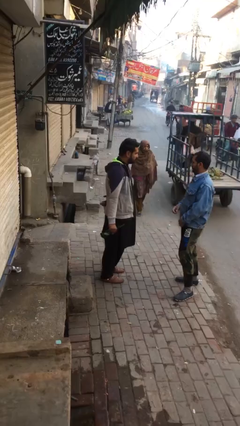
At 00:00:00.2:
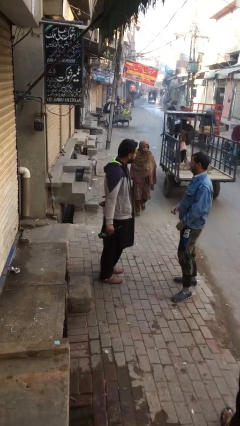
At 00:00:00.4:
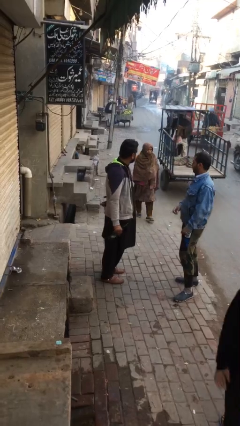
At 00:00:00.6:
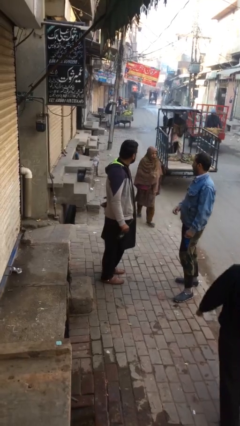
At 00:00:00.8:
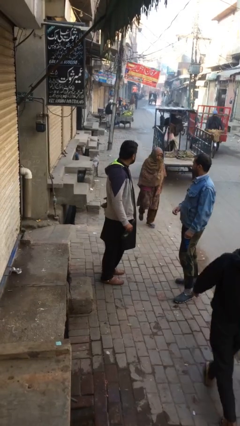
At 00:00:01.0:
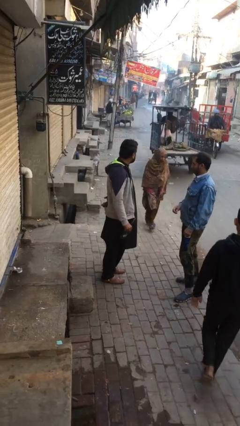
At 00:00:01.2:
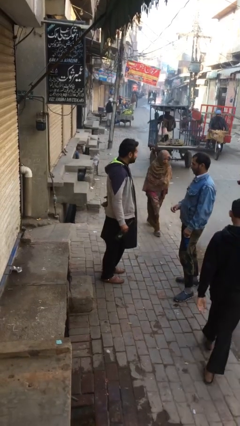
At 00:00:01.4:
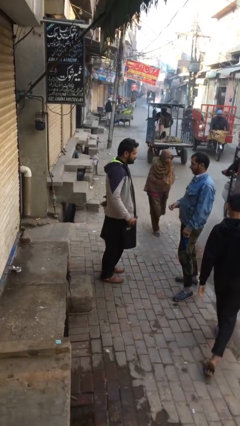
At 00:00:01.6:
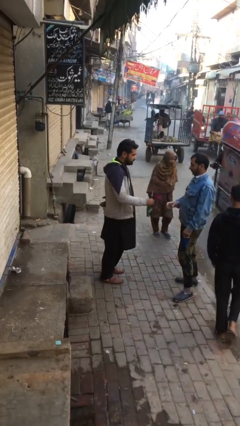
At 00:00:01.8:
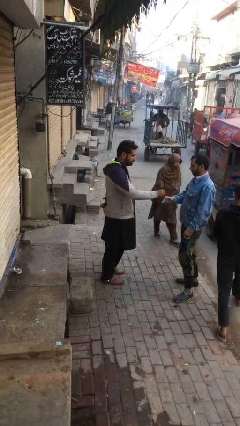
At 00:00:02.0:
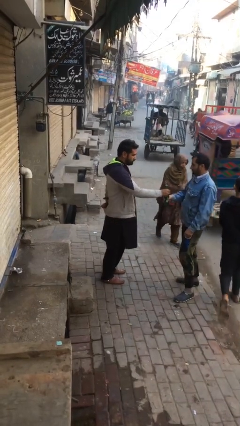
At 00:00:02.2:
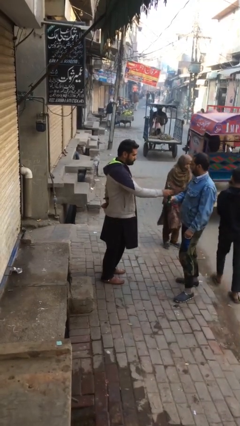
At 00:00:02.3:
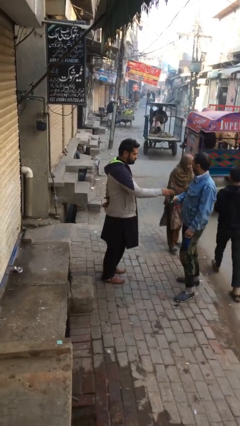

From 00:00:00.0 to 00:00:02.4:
person transfers object to person

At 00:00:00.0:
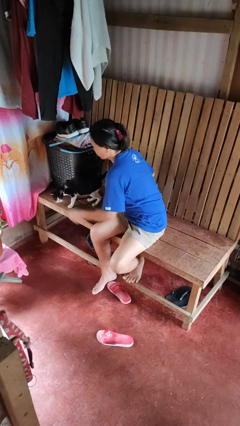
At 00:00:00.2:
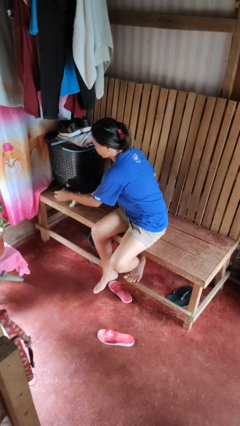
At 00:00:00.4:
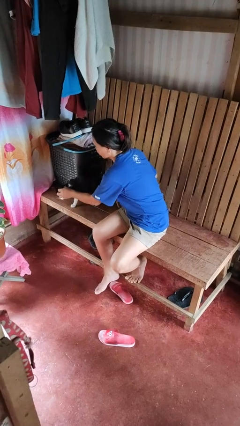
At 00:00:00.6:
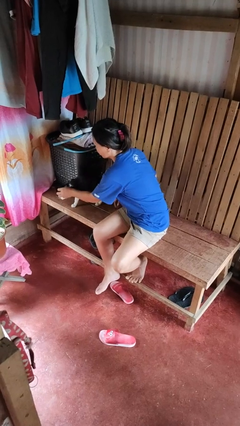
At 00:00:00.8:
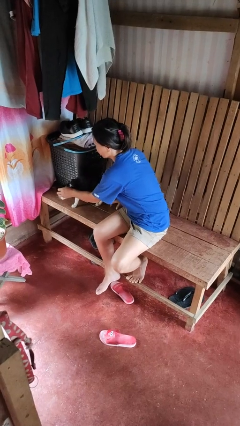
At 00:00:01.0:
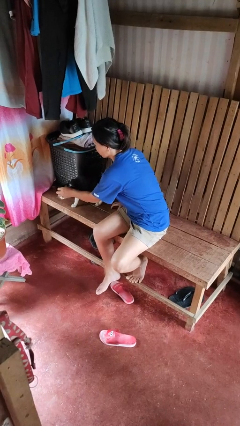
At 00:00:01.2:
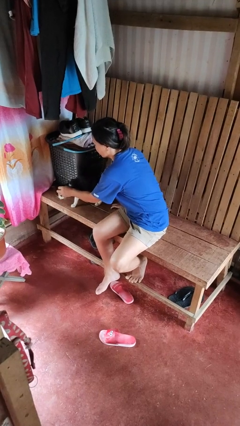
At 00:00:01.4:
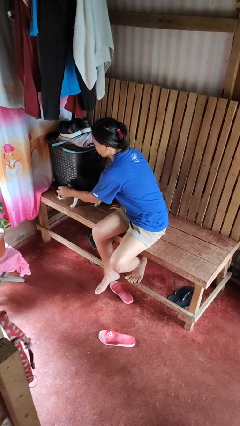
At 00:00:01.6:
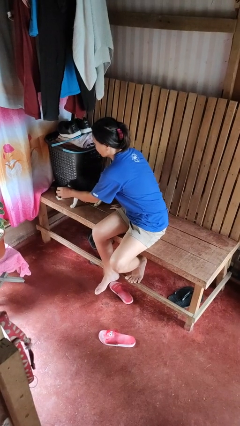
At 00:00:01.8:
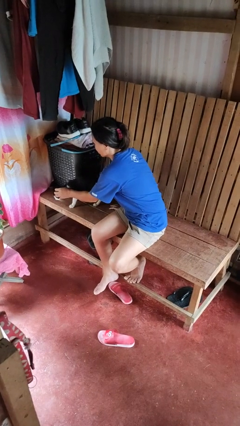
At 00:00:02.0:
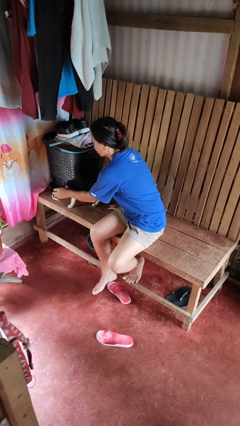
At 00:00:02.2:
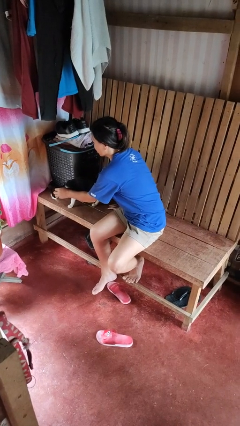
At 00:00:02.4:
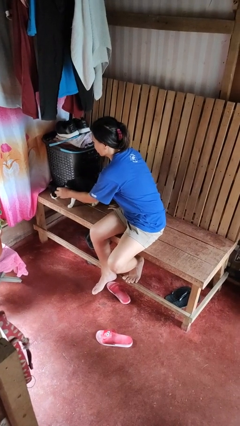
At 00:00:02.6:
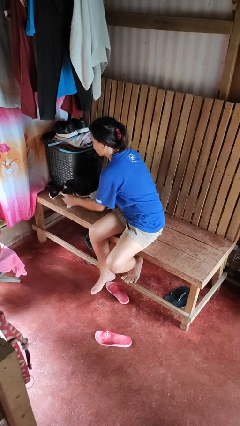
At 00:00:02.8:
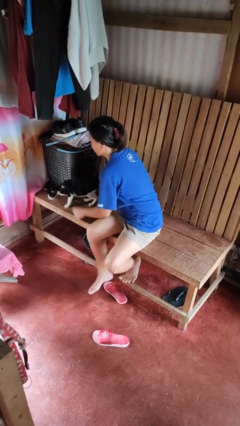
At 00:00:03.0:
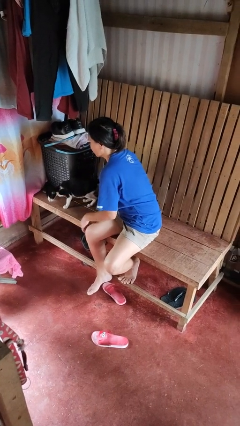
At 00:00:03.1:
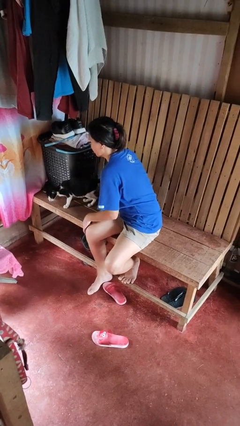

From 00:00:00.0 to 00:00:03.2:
person pets cat

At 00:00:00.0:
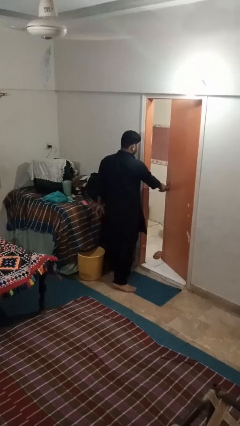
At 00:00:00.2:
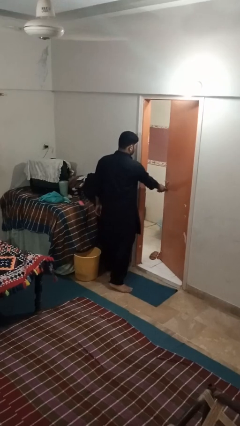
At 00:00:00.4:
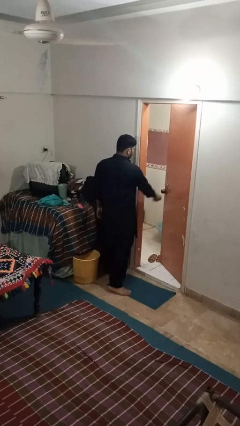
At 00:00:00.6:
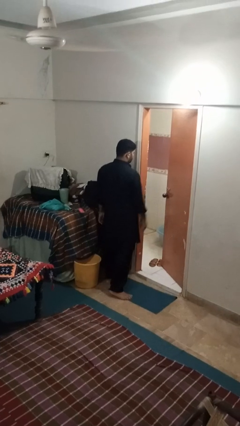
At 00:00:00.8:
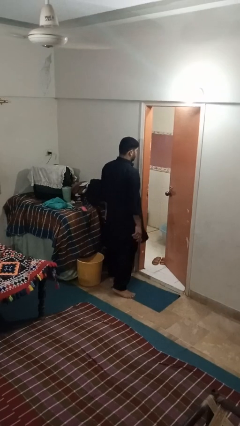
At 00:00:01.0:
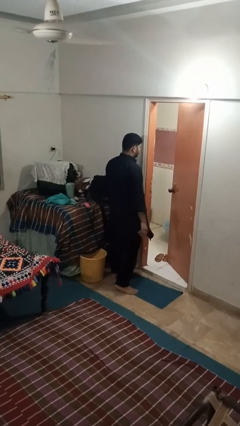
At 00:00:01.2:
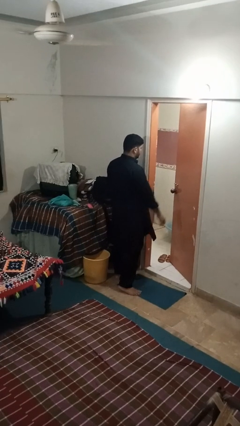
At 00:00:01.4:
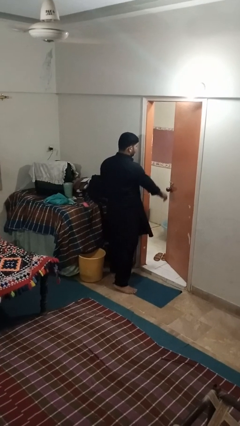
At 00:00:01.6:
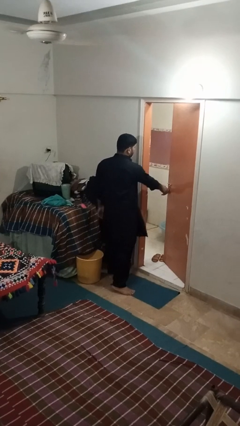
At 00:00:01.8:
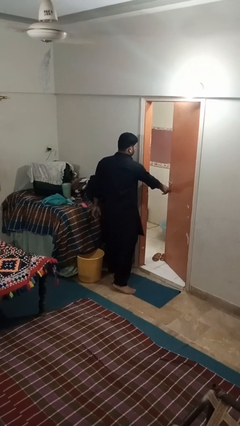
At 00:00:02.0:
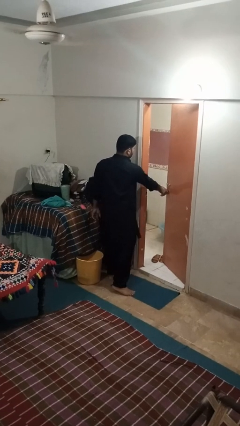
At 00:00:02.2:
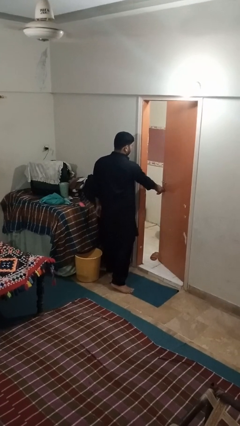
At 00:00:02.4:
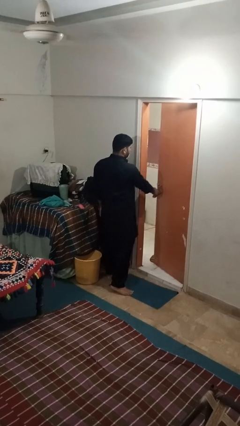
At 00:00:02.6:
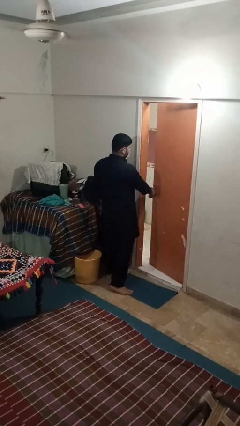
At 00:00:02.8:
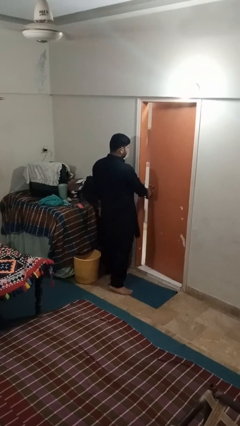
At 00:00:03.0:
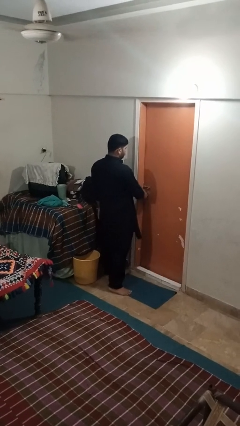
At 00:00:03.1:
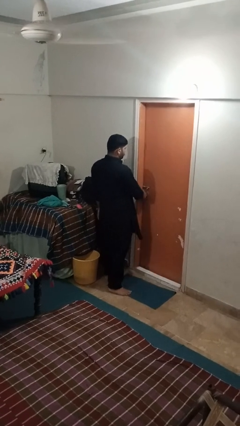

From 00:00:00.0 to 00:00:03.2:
person closes facility door

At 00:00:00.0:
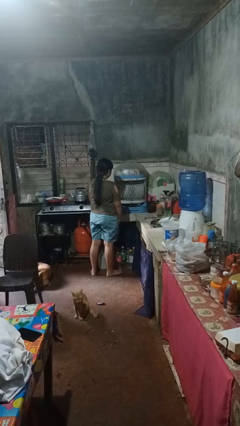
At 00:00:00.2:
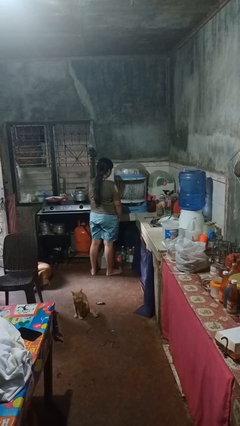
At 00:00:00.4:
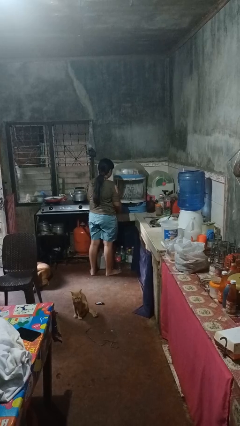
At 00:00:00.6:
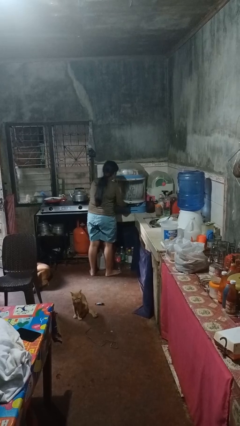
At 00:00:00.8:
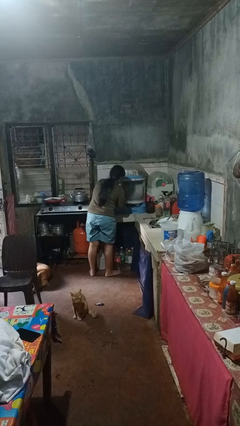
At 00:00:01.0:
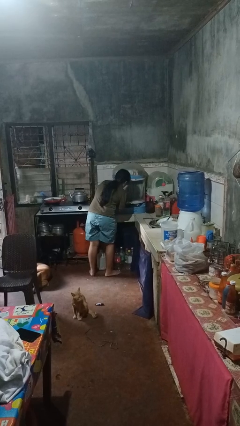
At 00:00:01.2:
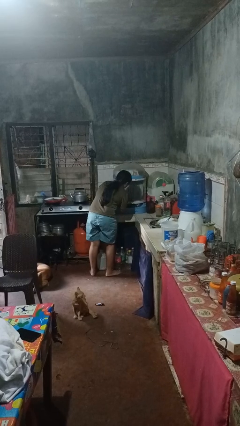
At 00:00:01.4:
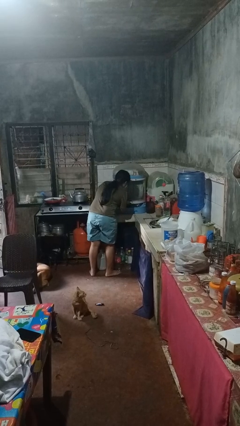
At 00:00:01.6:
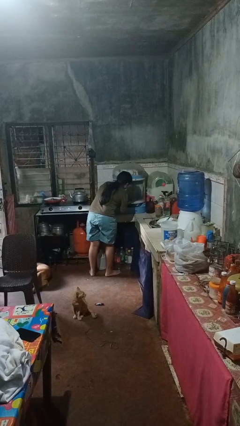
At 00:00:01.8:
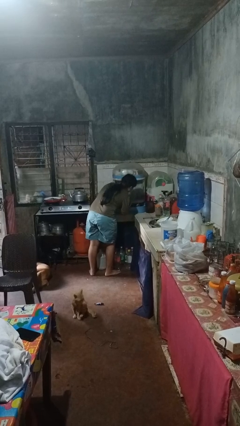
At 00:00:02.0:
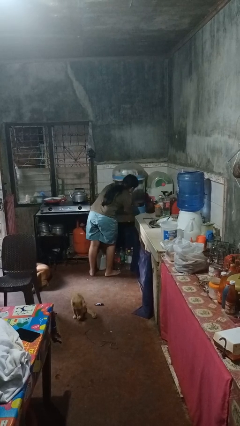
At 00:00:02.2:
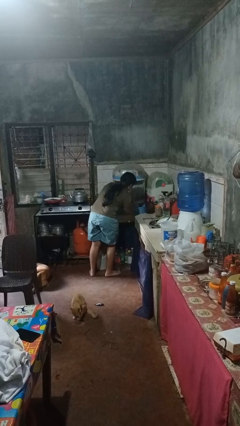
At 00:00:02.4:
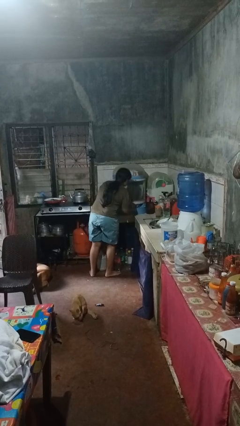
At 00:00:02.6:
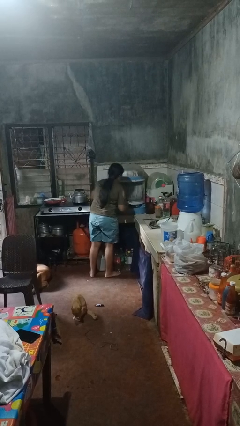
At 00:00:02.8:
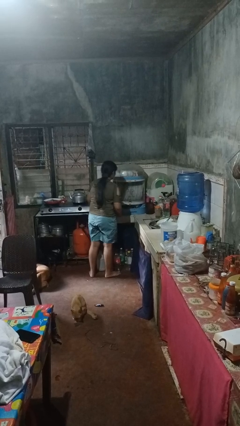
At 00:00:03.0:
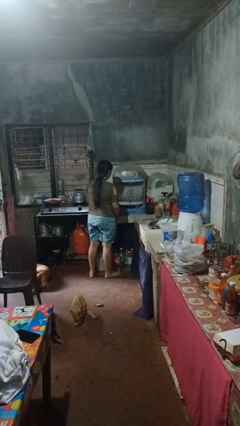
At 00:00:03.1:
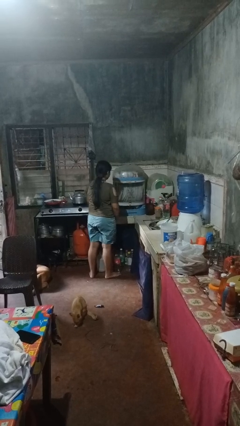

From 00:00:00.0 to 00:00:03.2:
person searches in kitchen drawer

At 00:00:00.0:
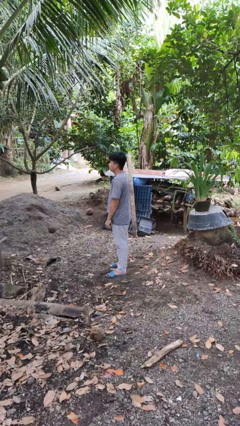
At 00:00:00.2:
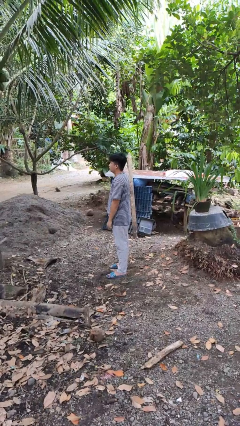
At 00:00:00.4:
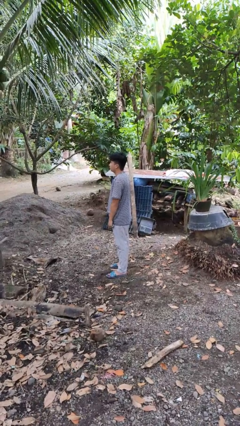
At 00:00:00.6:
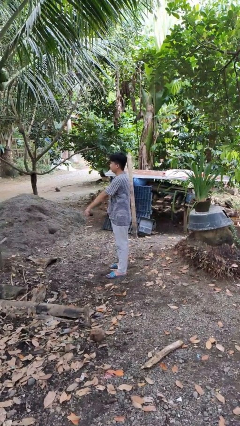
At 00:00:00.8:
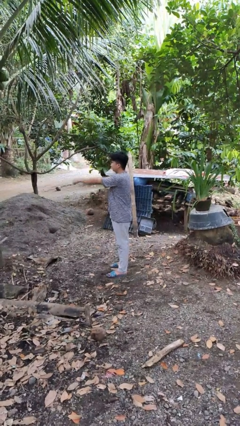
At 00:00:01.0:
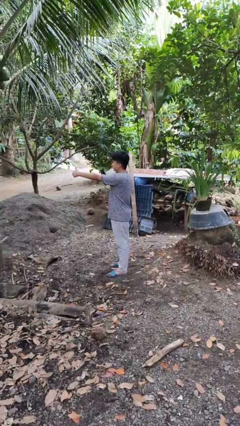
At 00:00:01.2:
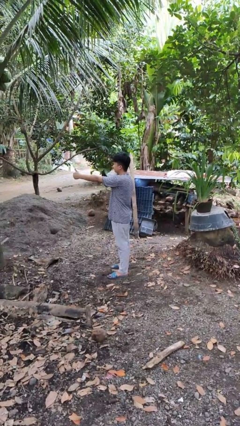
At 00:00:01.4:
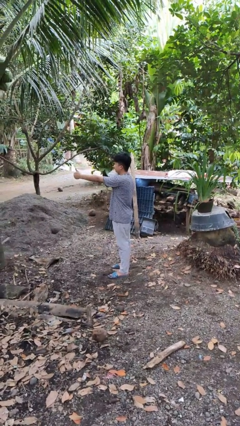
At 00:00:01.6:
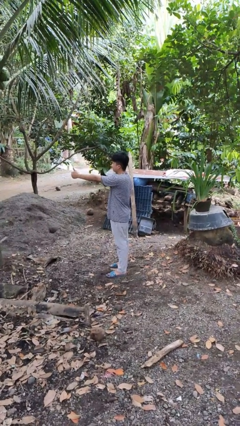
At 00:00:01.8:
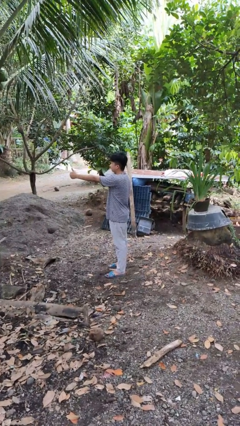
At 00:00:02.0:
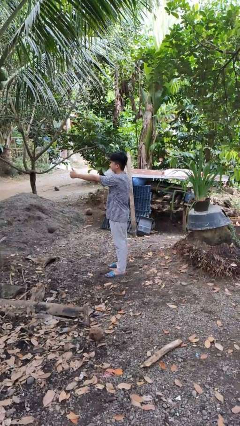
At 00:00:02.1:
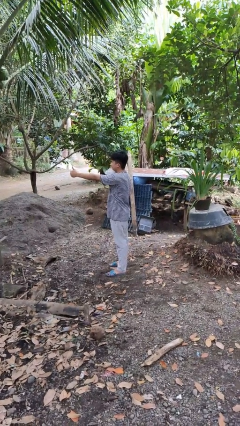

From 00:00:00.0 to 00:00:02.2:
person gestures thumbs up

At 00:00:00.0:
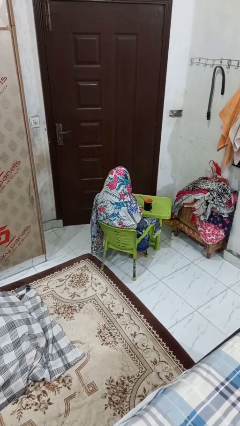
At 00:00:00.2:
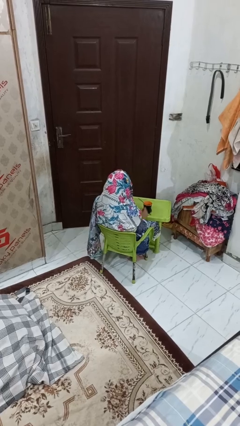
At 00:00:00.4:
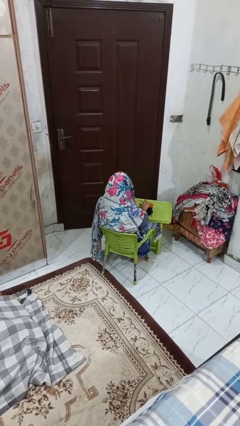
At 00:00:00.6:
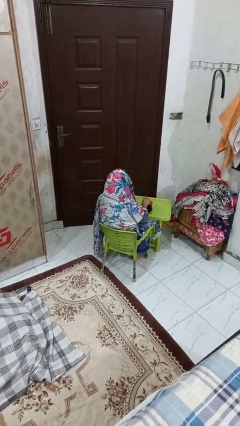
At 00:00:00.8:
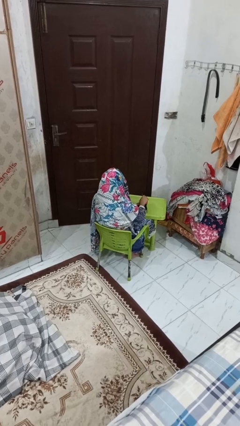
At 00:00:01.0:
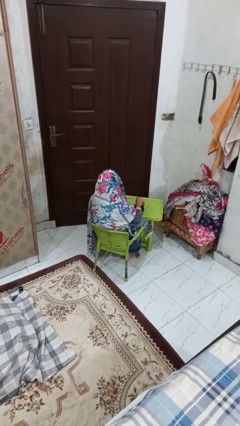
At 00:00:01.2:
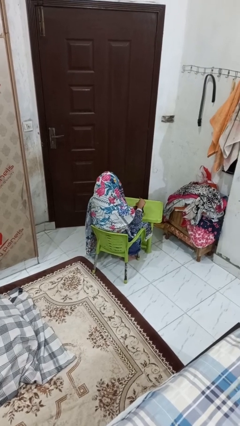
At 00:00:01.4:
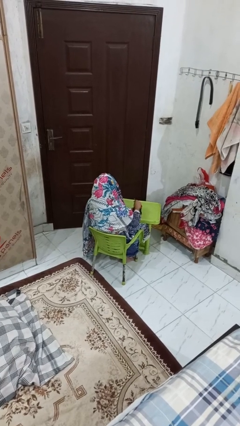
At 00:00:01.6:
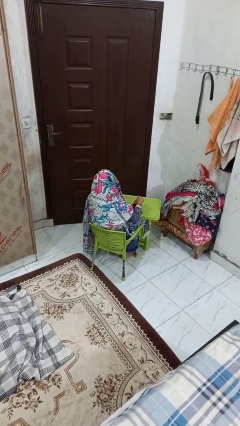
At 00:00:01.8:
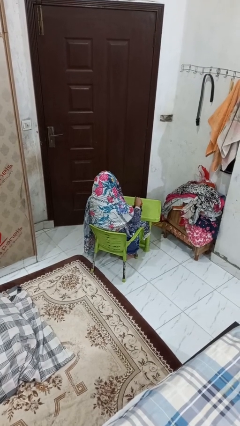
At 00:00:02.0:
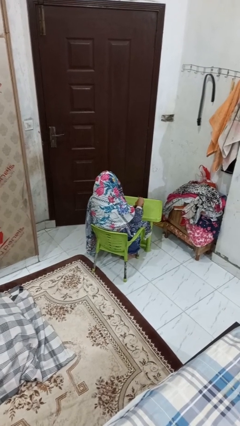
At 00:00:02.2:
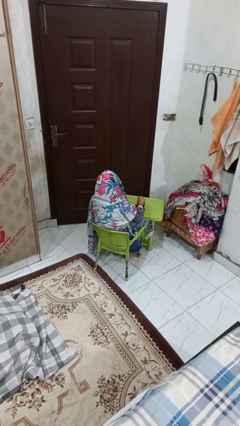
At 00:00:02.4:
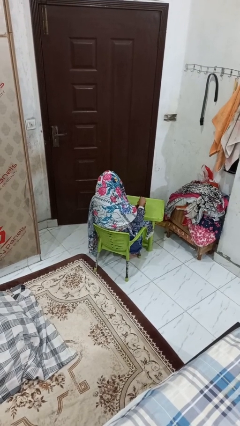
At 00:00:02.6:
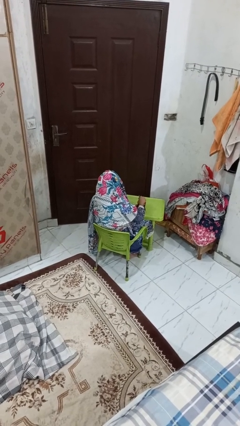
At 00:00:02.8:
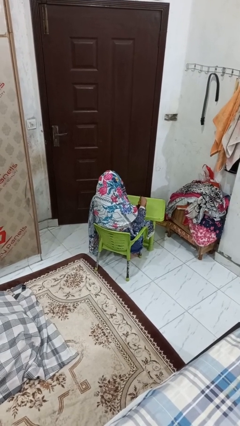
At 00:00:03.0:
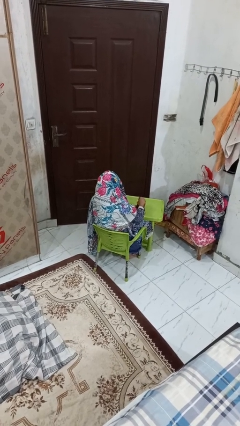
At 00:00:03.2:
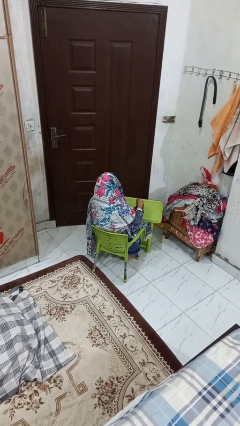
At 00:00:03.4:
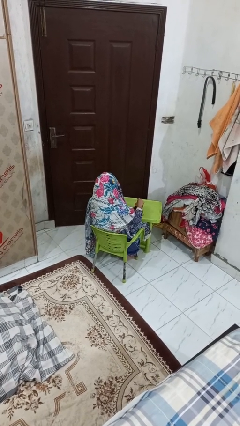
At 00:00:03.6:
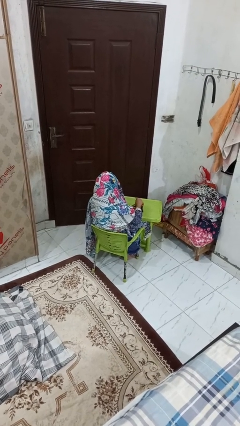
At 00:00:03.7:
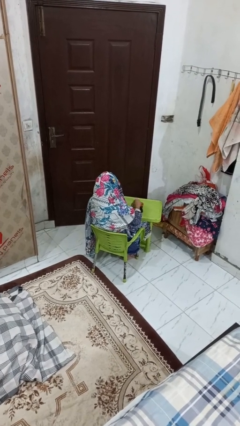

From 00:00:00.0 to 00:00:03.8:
person stirs mug
